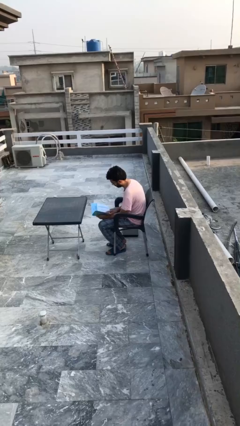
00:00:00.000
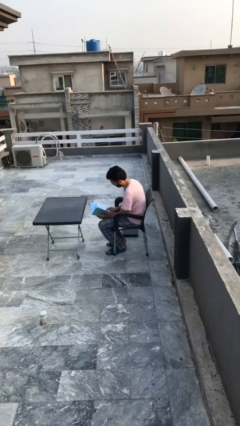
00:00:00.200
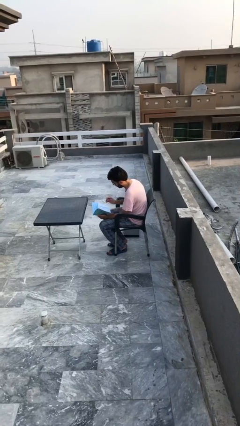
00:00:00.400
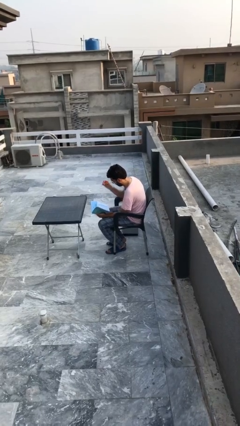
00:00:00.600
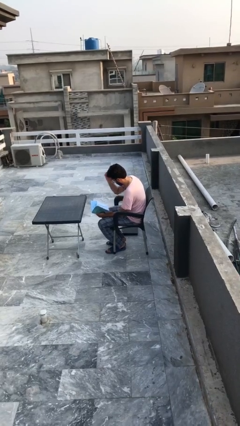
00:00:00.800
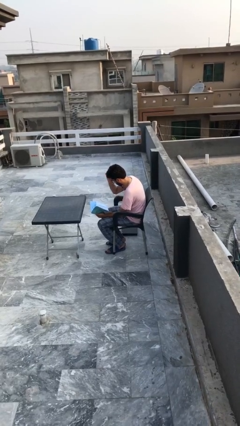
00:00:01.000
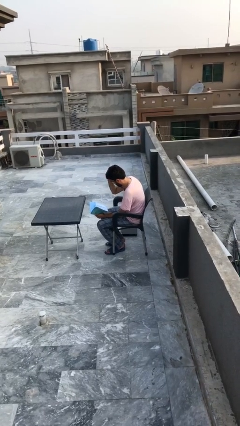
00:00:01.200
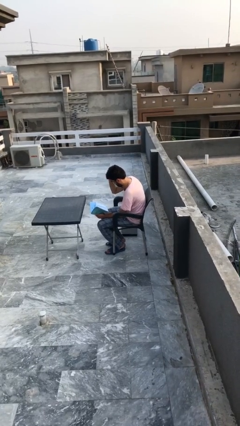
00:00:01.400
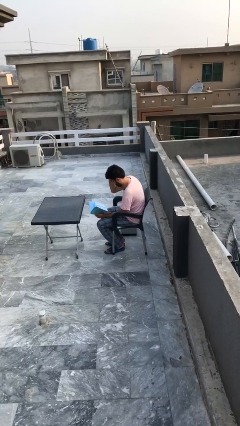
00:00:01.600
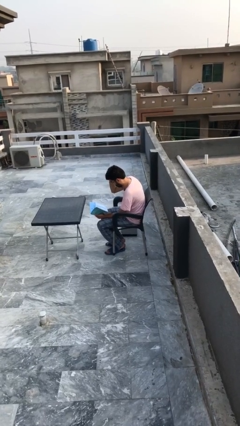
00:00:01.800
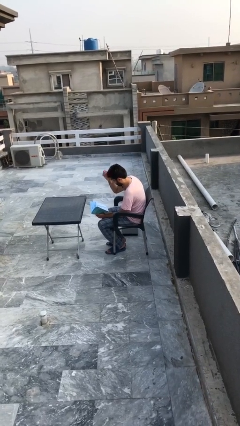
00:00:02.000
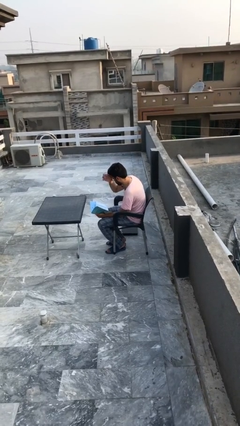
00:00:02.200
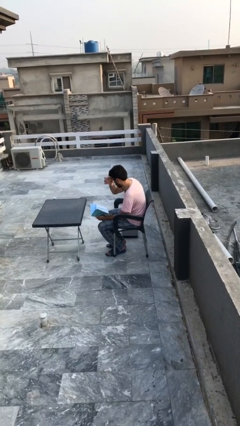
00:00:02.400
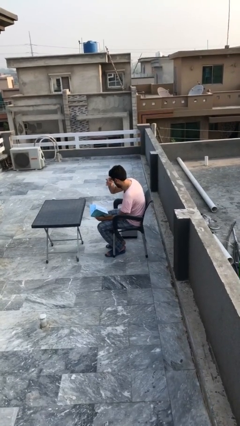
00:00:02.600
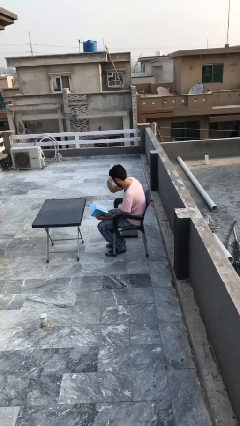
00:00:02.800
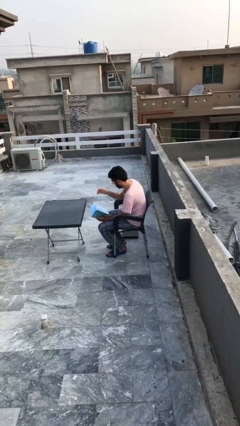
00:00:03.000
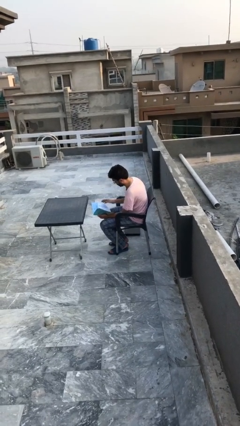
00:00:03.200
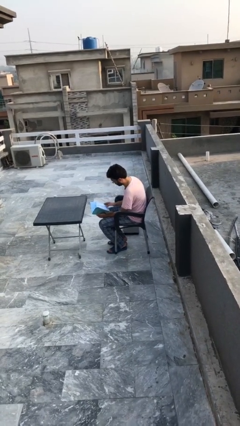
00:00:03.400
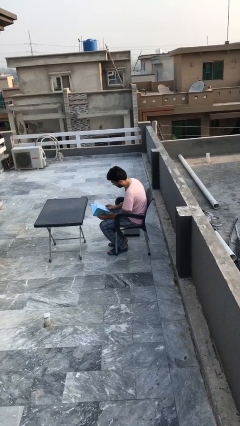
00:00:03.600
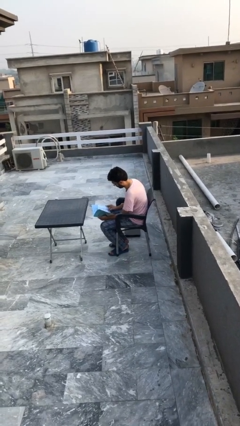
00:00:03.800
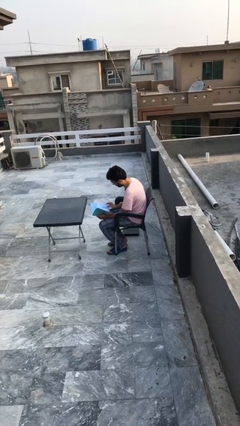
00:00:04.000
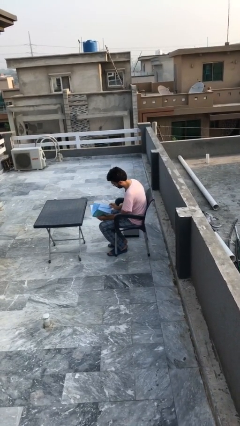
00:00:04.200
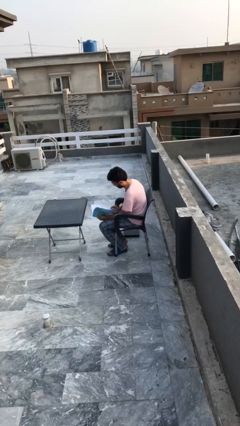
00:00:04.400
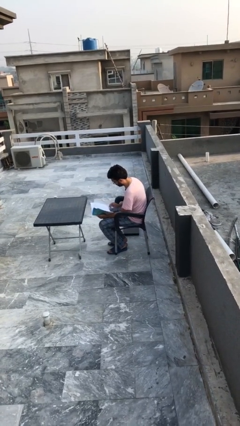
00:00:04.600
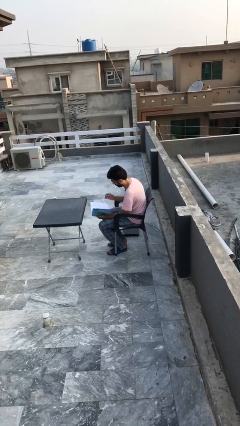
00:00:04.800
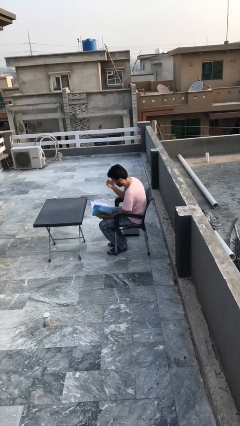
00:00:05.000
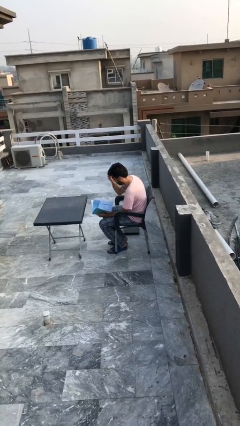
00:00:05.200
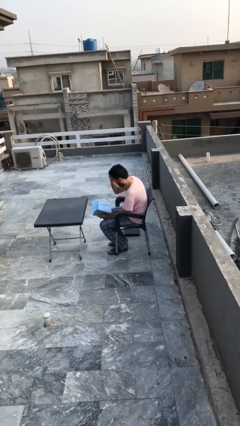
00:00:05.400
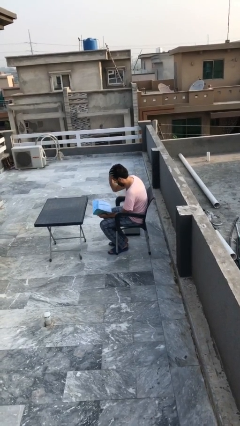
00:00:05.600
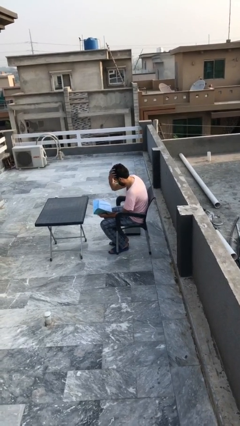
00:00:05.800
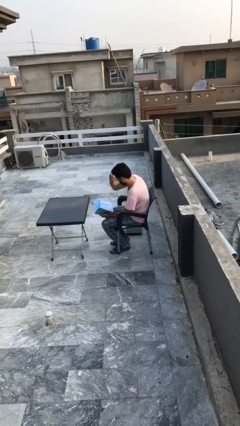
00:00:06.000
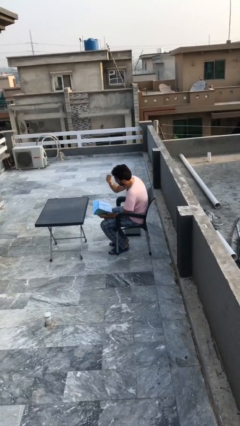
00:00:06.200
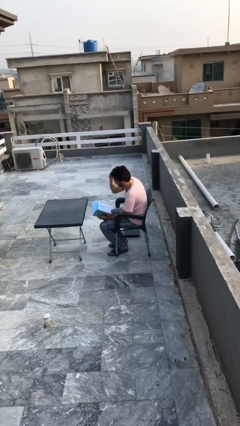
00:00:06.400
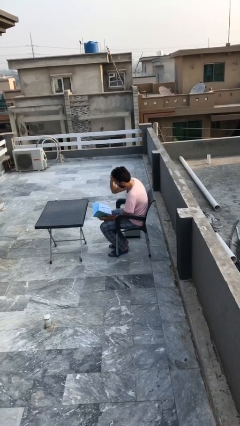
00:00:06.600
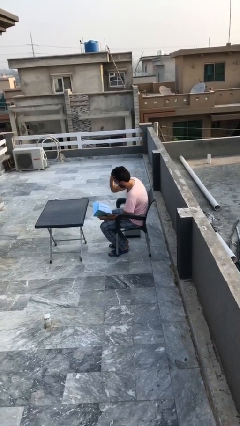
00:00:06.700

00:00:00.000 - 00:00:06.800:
person reads document

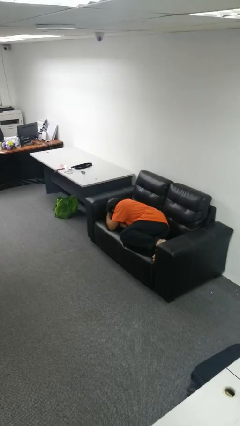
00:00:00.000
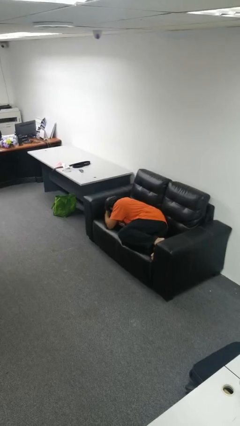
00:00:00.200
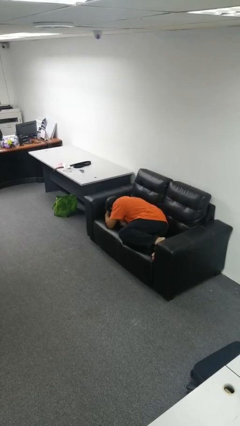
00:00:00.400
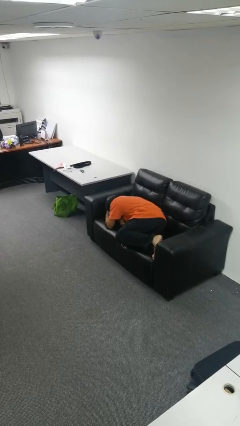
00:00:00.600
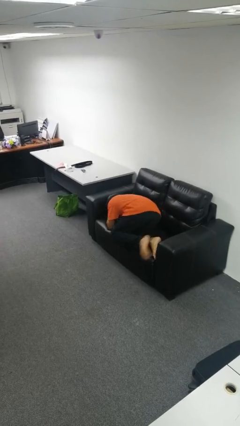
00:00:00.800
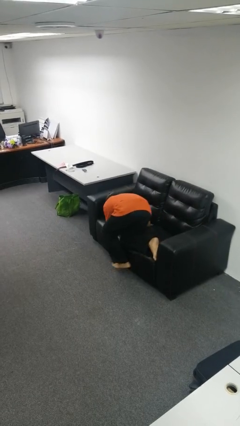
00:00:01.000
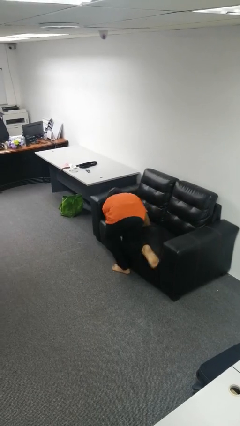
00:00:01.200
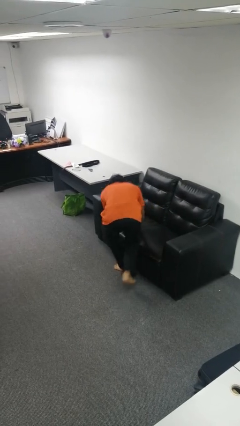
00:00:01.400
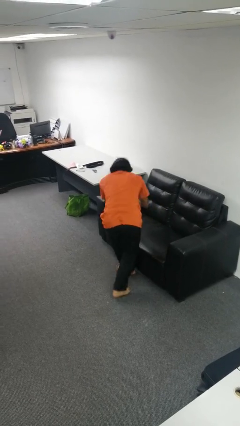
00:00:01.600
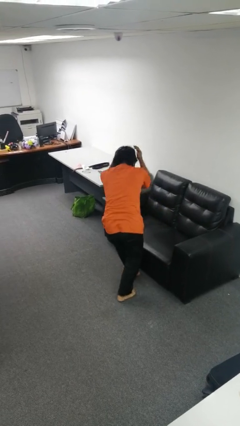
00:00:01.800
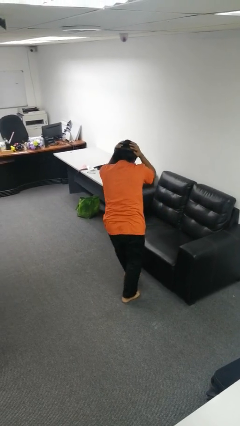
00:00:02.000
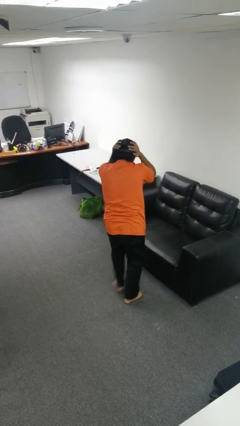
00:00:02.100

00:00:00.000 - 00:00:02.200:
person stands up

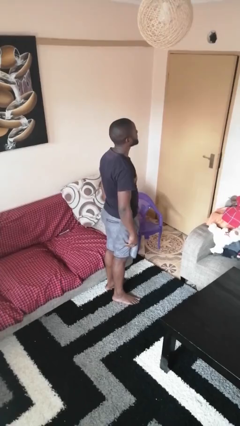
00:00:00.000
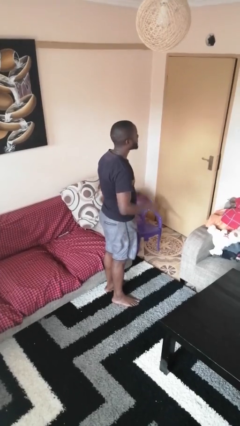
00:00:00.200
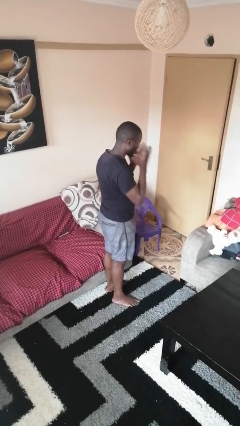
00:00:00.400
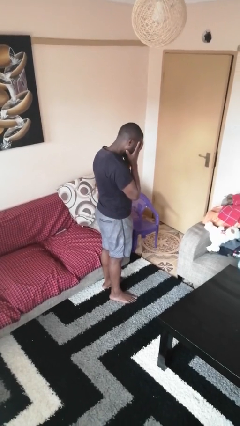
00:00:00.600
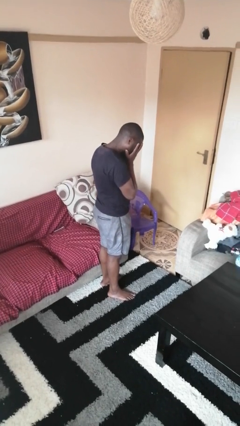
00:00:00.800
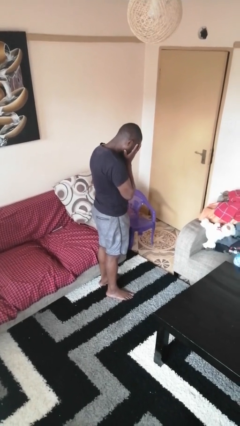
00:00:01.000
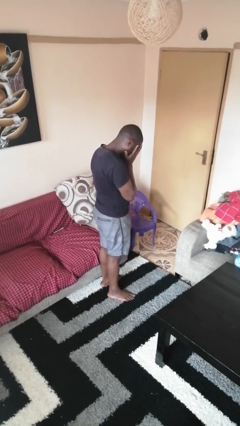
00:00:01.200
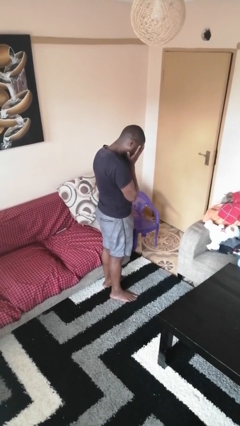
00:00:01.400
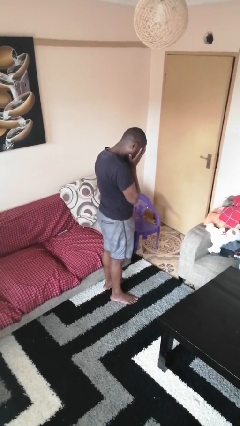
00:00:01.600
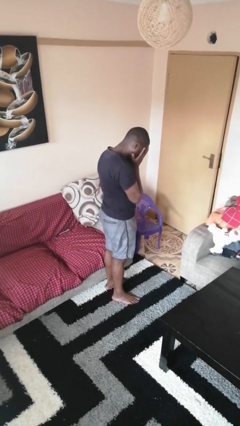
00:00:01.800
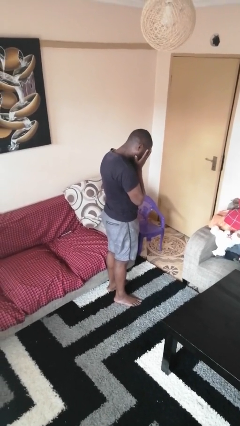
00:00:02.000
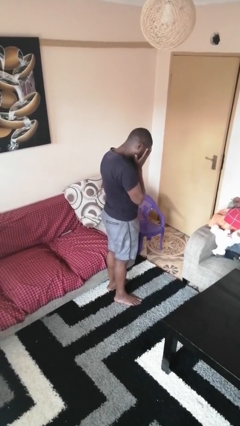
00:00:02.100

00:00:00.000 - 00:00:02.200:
person covers face with hands

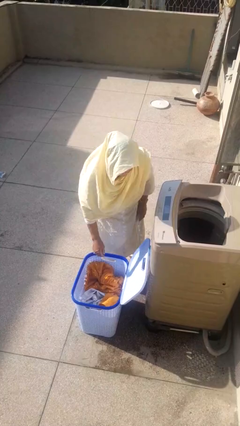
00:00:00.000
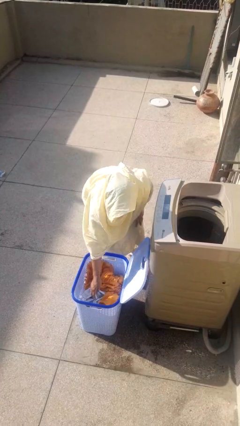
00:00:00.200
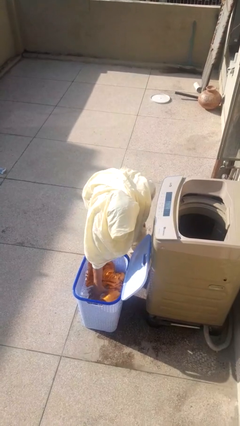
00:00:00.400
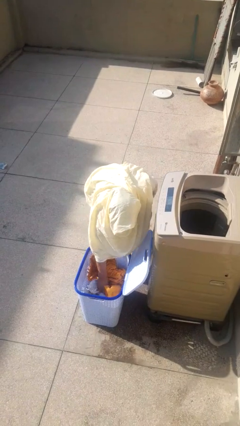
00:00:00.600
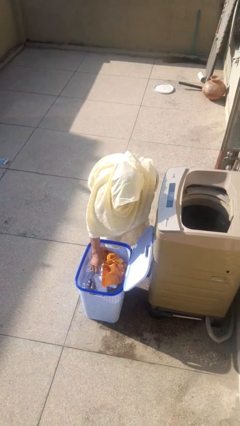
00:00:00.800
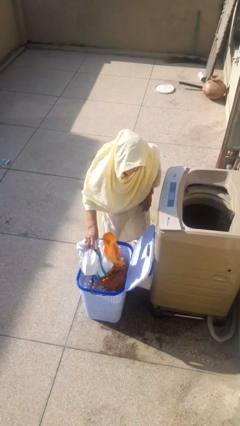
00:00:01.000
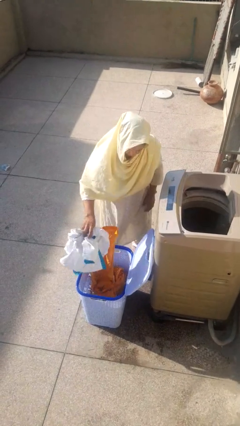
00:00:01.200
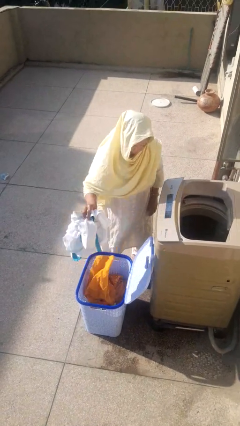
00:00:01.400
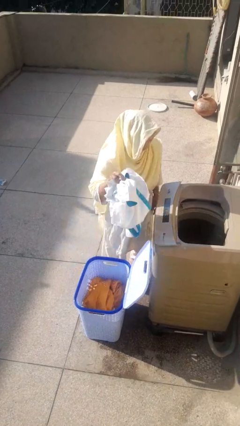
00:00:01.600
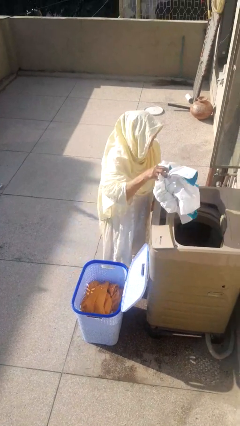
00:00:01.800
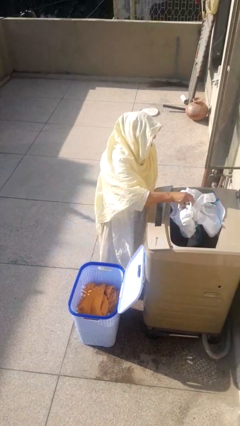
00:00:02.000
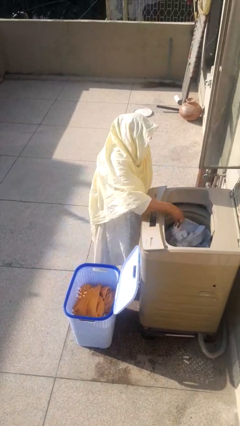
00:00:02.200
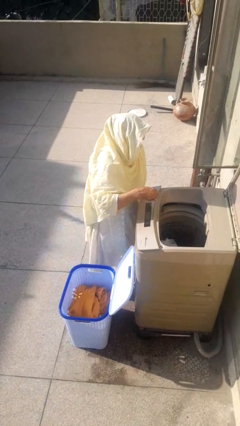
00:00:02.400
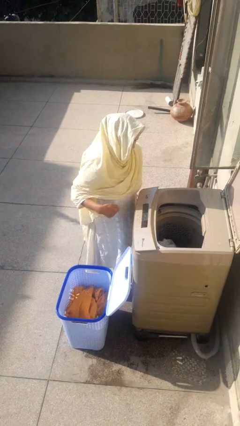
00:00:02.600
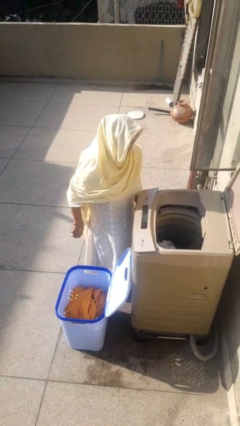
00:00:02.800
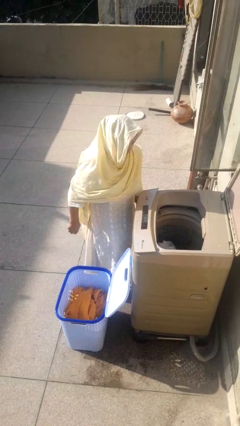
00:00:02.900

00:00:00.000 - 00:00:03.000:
person loads clotheswasher

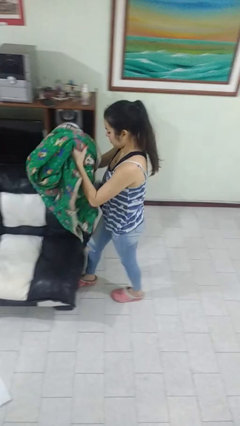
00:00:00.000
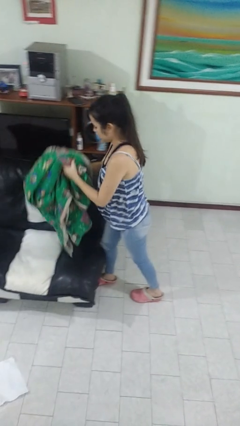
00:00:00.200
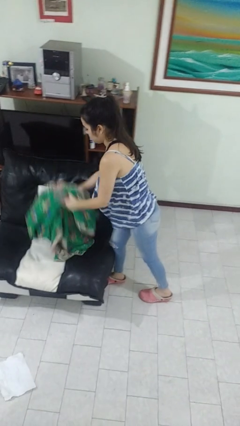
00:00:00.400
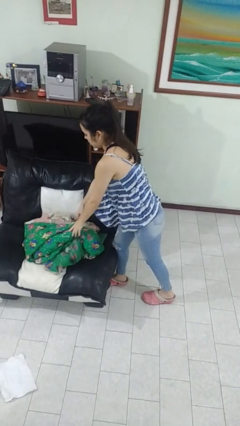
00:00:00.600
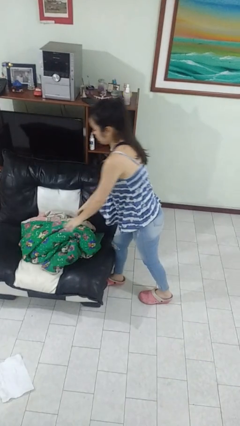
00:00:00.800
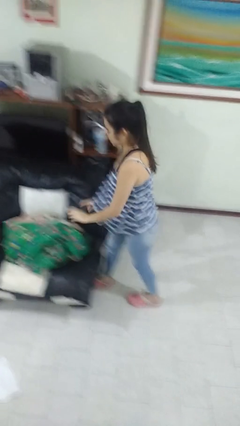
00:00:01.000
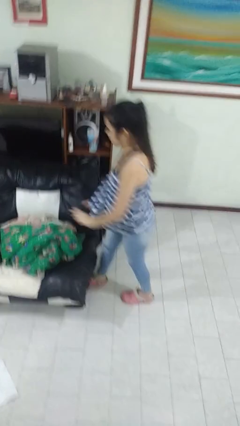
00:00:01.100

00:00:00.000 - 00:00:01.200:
person puts down object on couch

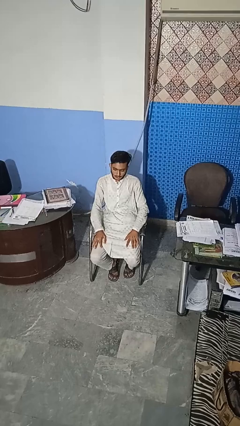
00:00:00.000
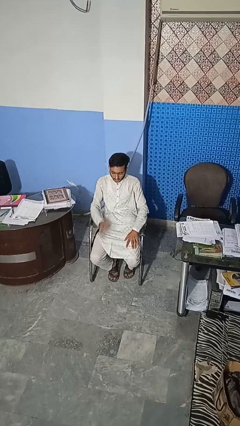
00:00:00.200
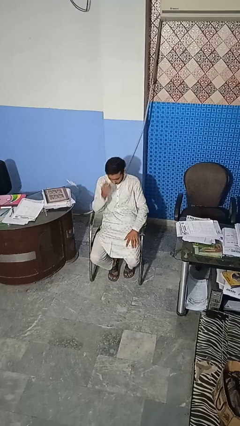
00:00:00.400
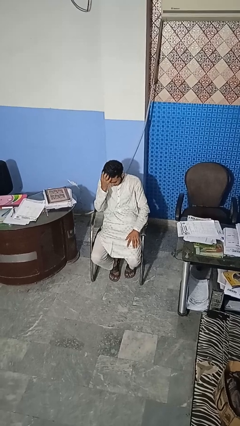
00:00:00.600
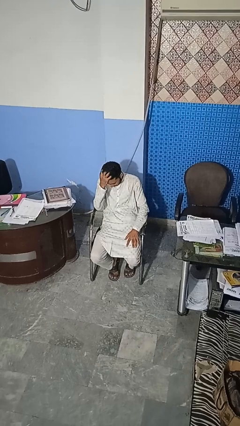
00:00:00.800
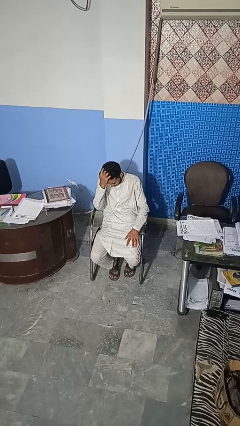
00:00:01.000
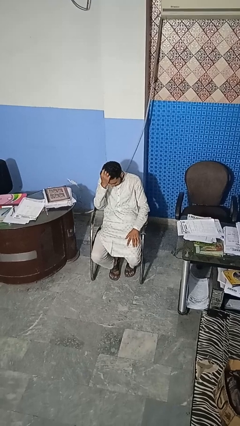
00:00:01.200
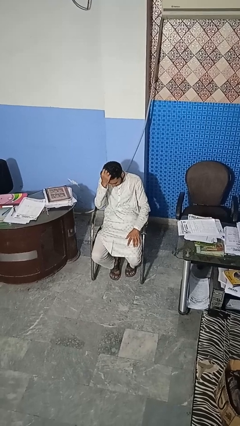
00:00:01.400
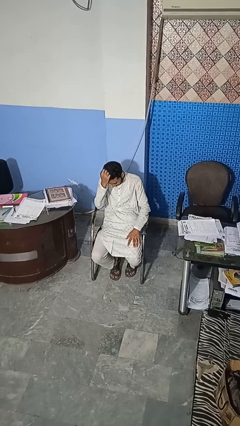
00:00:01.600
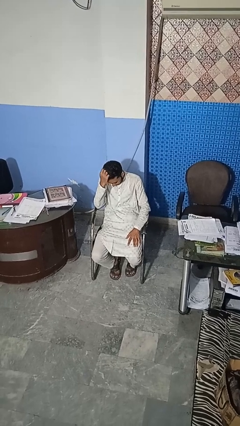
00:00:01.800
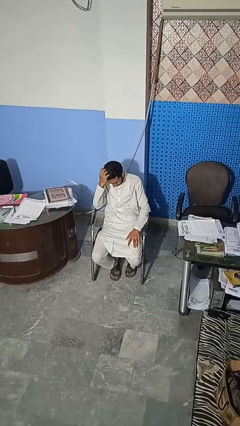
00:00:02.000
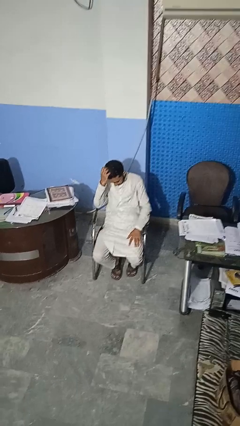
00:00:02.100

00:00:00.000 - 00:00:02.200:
person scratches face
